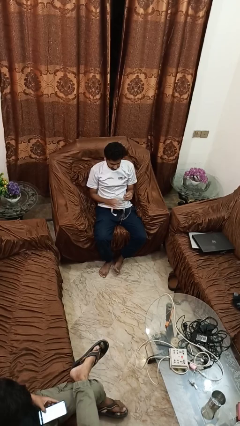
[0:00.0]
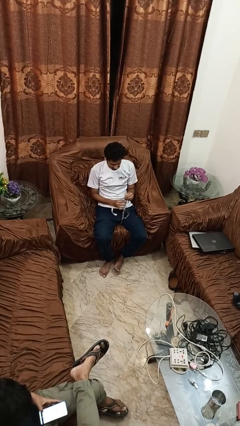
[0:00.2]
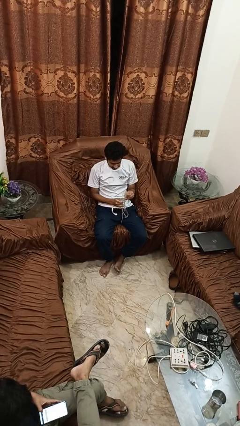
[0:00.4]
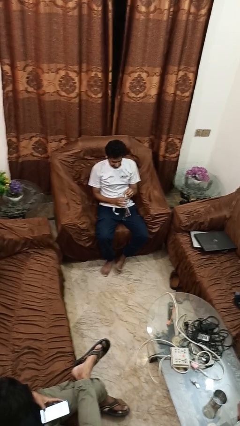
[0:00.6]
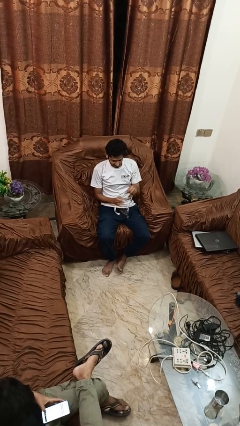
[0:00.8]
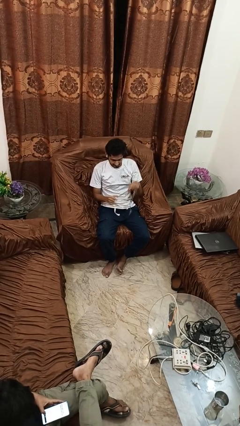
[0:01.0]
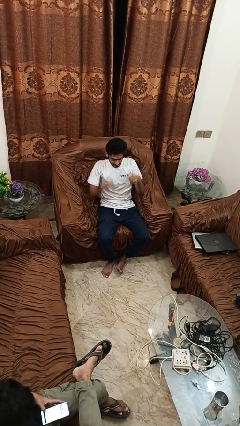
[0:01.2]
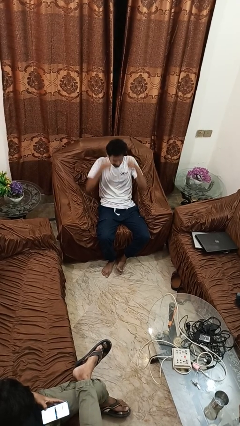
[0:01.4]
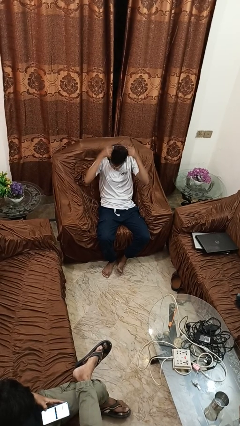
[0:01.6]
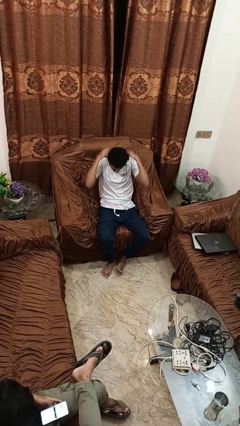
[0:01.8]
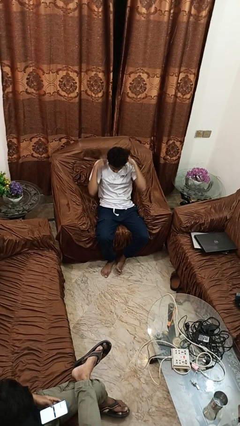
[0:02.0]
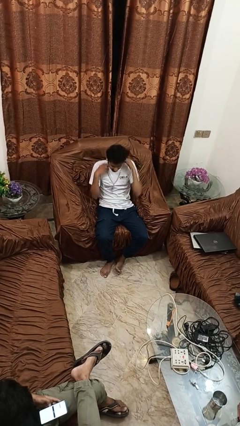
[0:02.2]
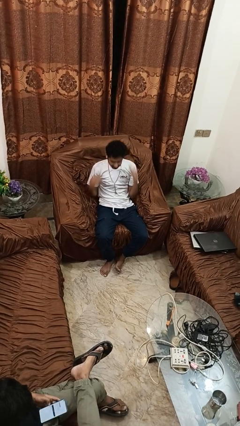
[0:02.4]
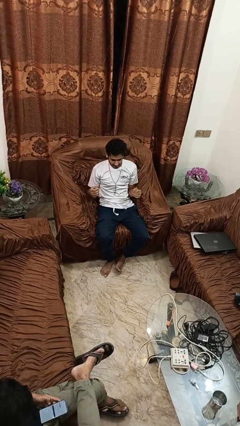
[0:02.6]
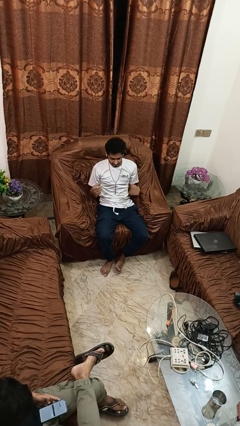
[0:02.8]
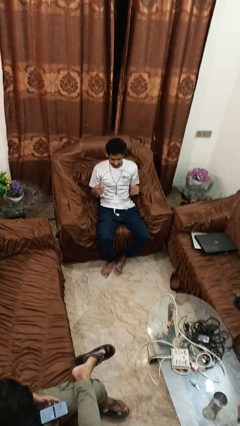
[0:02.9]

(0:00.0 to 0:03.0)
person puts on necklace

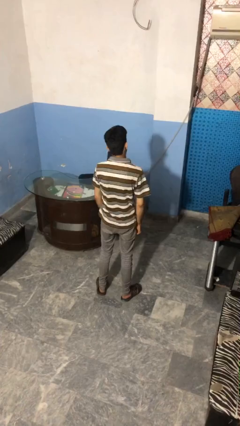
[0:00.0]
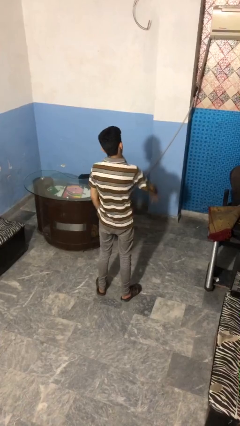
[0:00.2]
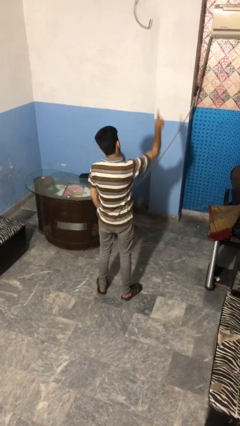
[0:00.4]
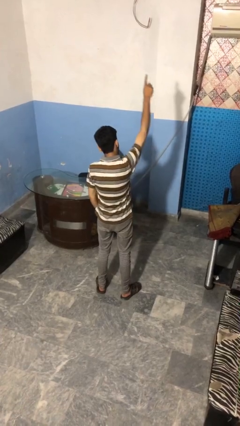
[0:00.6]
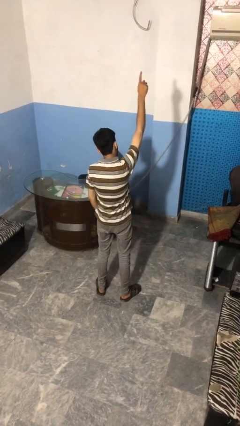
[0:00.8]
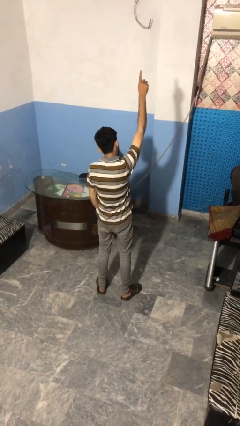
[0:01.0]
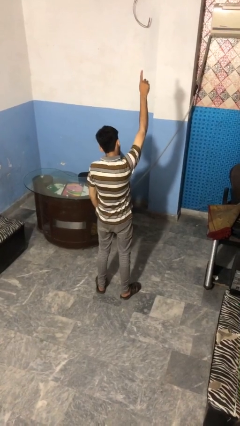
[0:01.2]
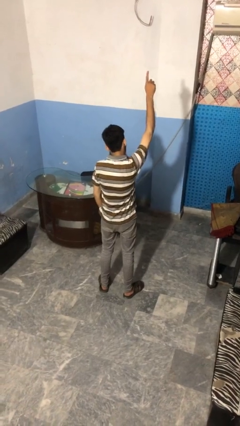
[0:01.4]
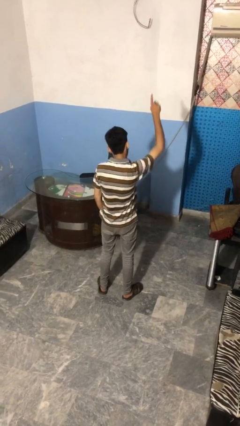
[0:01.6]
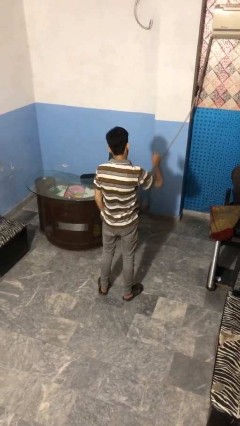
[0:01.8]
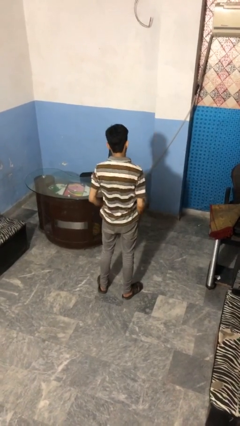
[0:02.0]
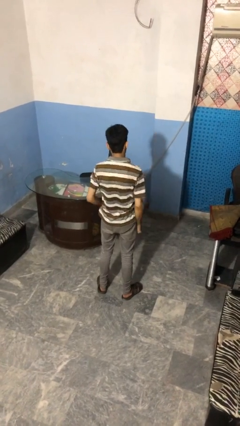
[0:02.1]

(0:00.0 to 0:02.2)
person gestures number one

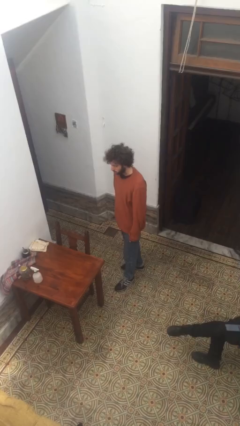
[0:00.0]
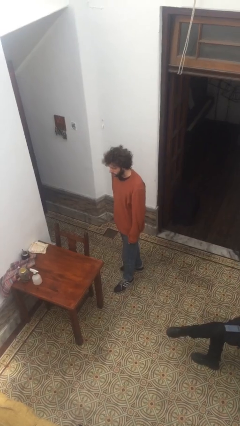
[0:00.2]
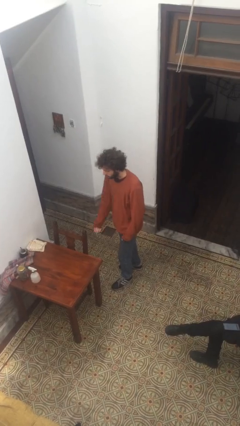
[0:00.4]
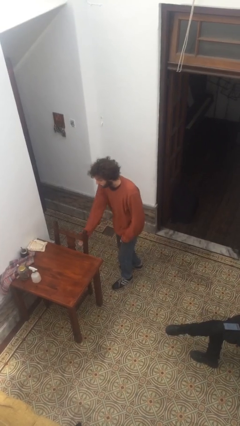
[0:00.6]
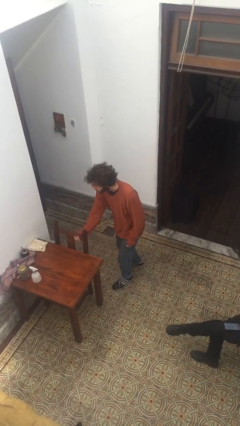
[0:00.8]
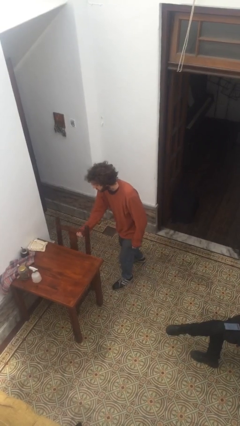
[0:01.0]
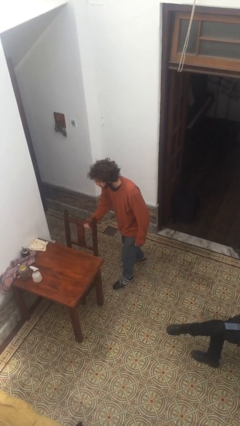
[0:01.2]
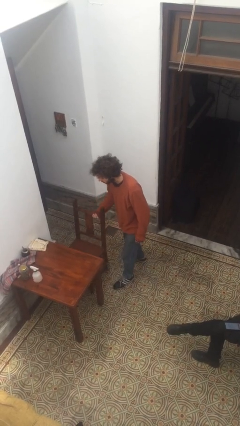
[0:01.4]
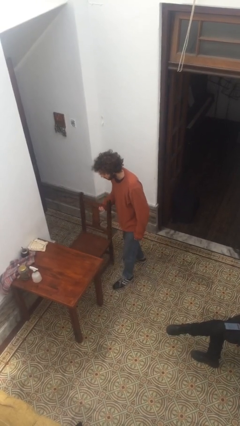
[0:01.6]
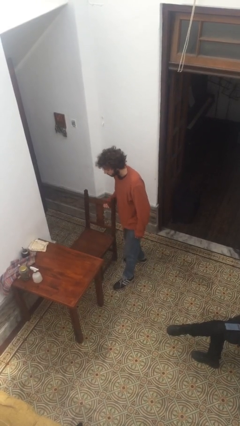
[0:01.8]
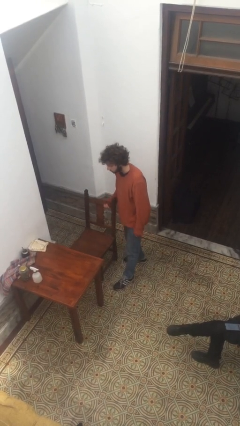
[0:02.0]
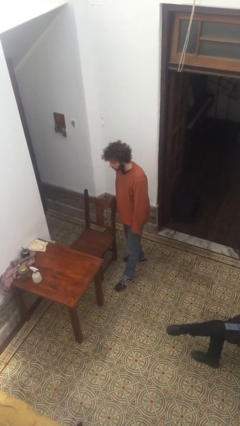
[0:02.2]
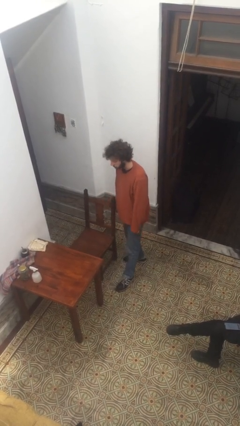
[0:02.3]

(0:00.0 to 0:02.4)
person pulls out chair

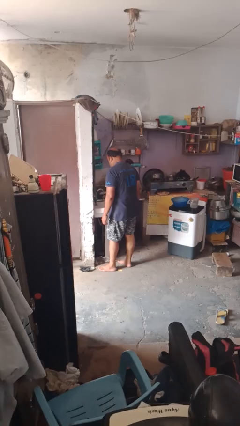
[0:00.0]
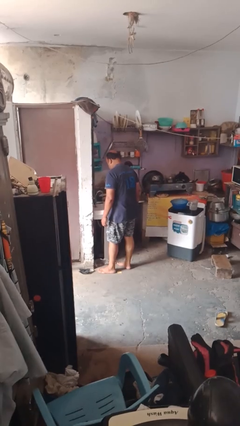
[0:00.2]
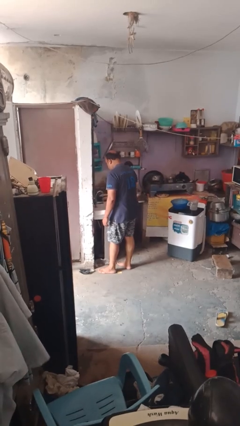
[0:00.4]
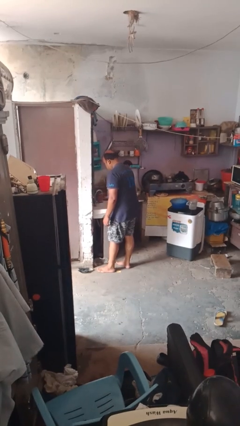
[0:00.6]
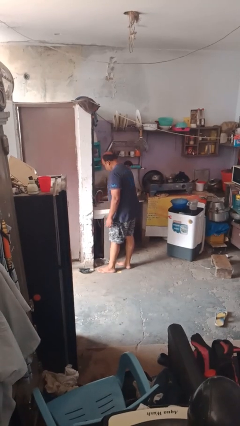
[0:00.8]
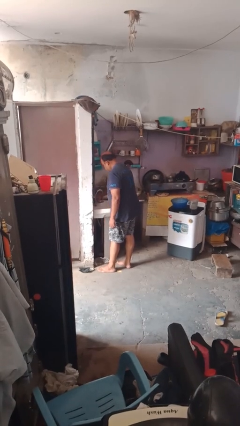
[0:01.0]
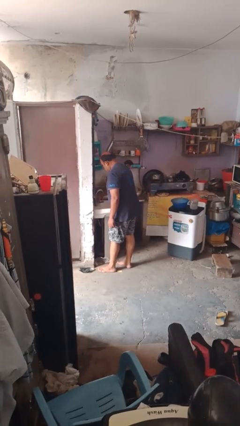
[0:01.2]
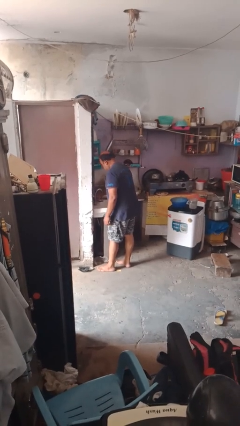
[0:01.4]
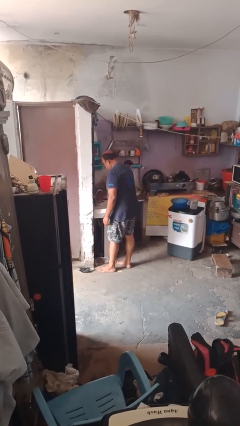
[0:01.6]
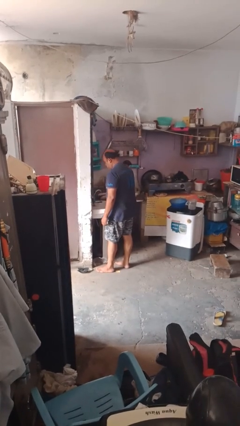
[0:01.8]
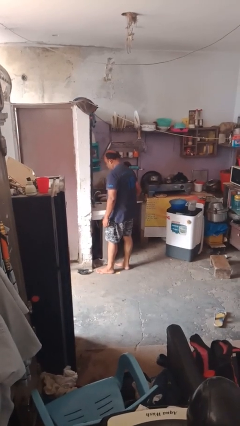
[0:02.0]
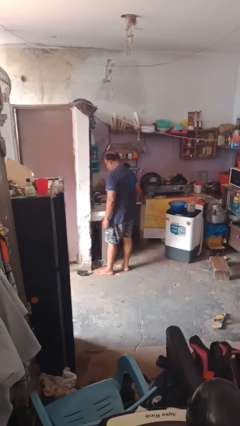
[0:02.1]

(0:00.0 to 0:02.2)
person turns off faucet

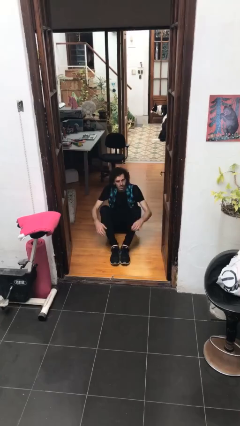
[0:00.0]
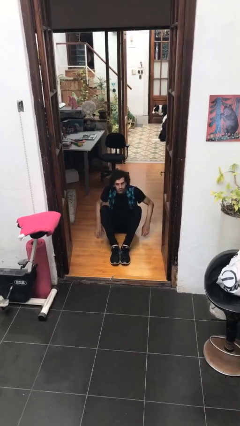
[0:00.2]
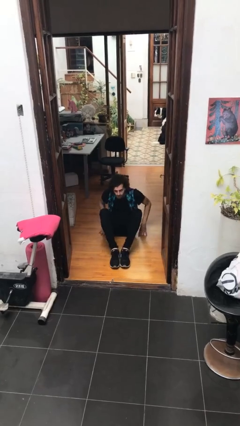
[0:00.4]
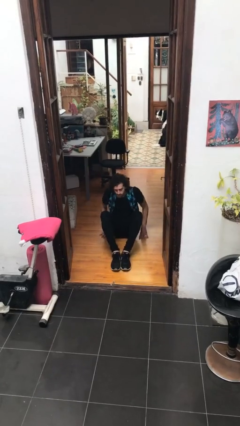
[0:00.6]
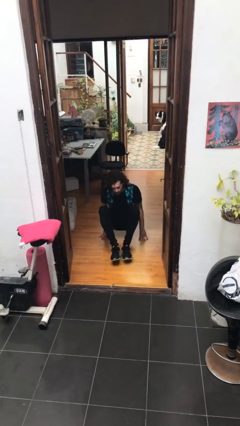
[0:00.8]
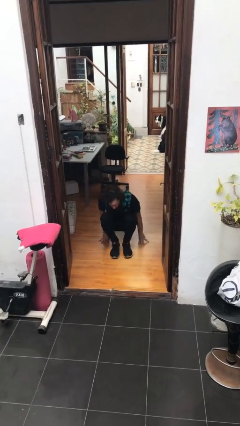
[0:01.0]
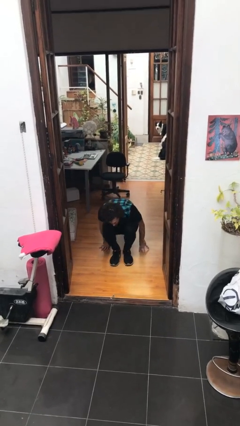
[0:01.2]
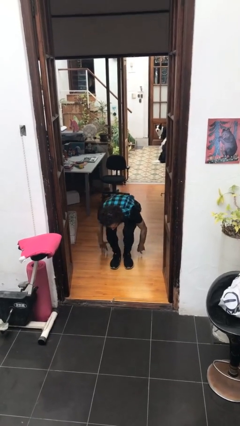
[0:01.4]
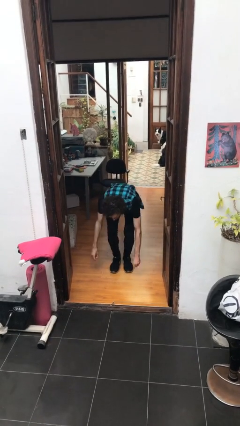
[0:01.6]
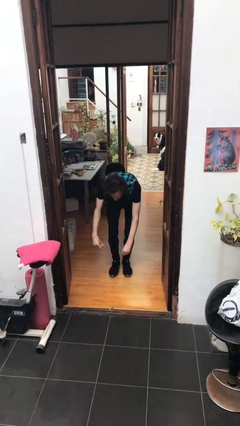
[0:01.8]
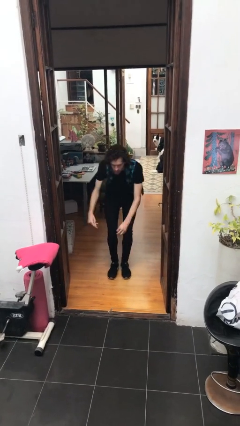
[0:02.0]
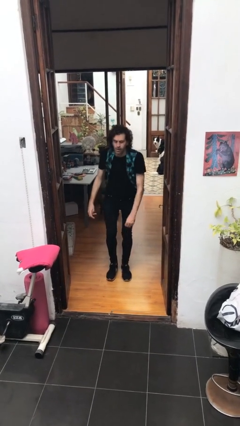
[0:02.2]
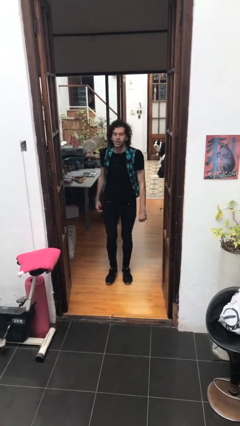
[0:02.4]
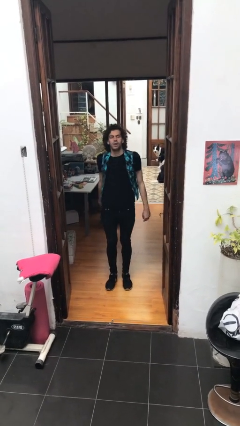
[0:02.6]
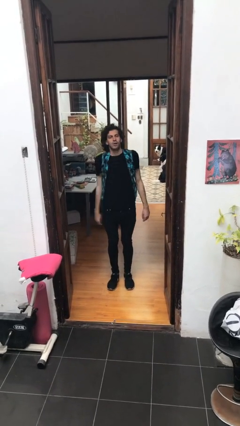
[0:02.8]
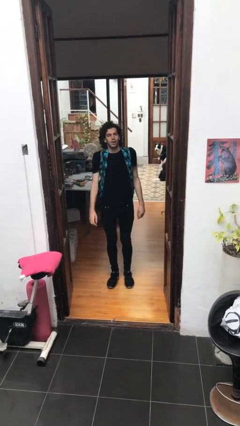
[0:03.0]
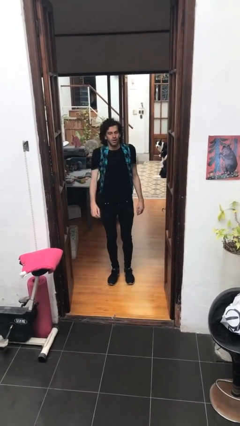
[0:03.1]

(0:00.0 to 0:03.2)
person stands up

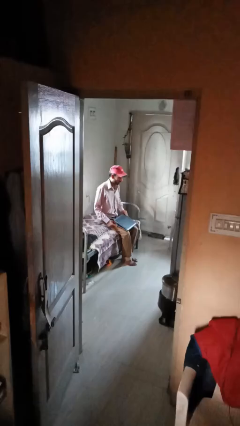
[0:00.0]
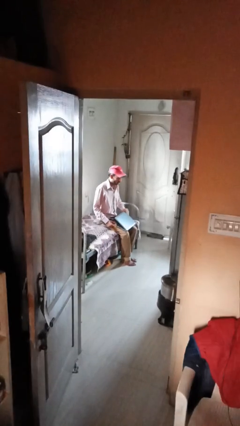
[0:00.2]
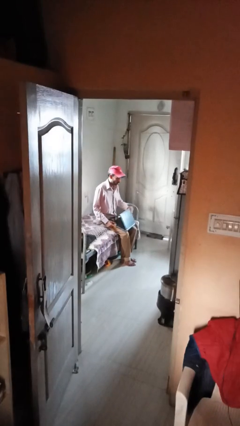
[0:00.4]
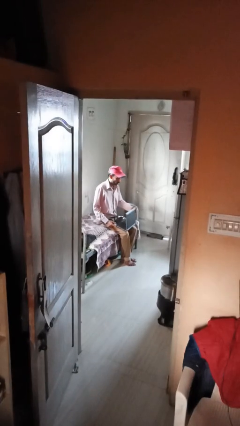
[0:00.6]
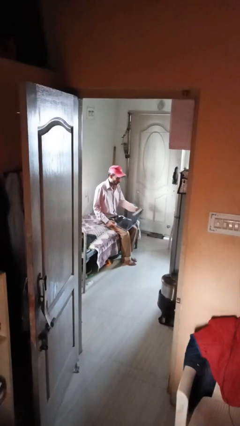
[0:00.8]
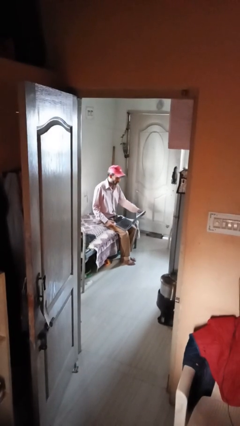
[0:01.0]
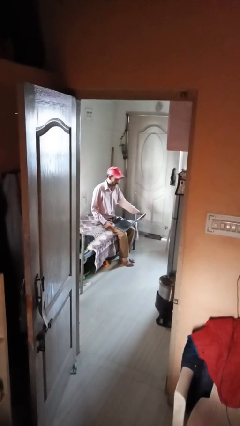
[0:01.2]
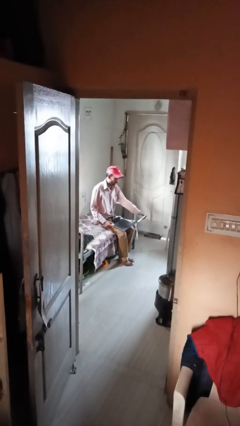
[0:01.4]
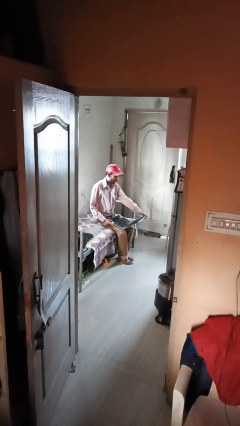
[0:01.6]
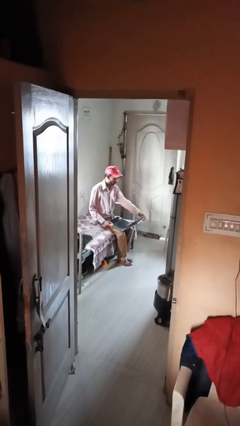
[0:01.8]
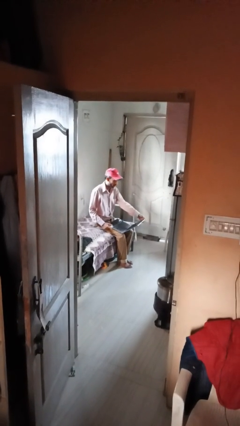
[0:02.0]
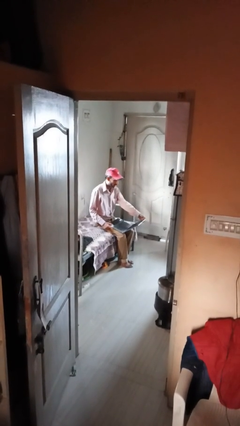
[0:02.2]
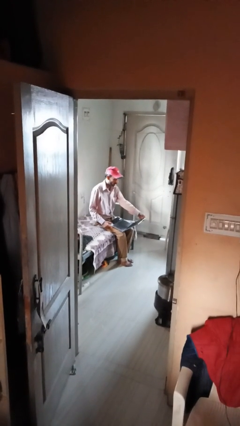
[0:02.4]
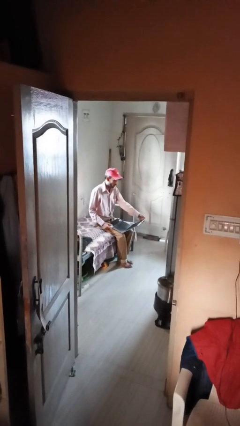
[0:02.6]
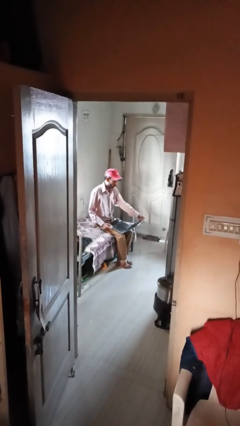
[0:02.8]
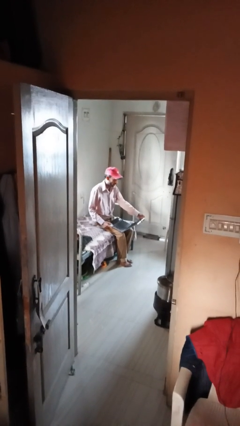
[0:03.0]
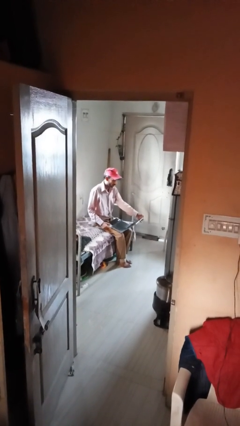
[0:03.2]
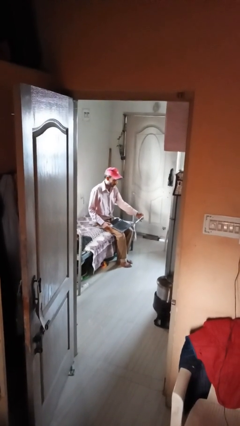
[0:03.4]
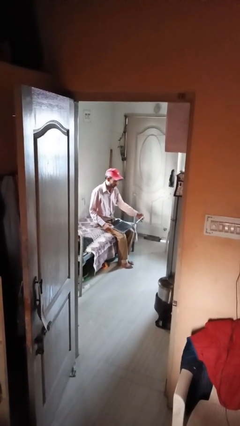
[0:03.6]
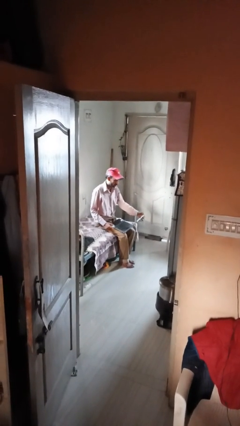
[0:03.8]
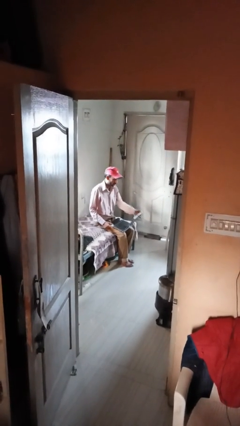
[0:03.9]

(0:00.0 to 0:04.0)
person opens laptop

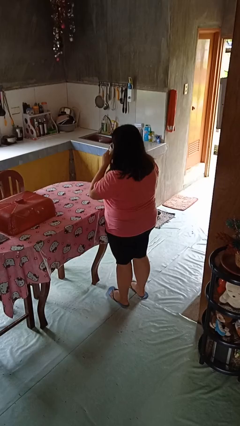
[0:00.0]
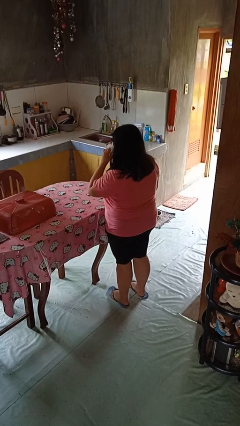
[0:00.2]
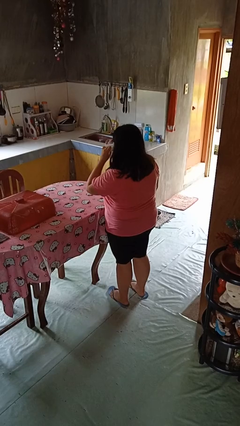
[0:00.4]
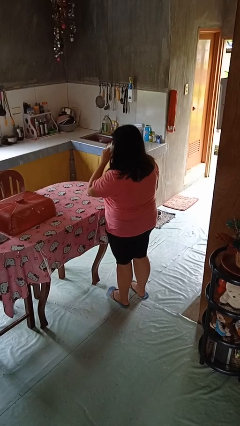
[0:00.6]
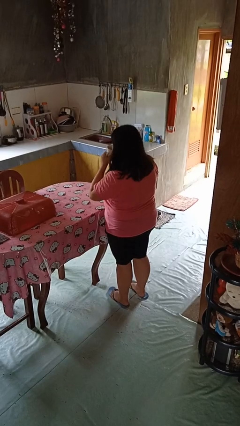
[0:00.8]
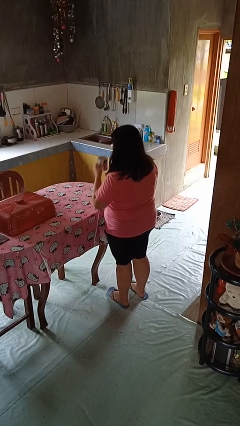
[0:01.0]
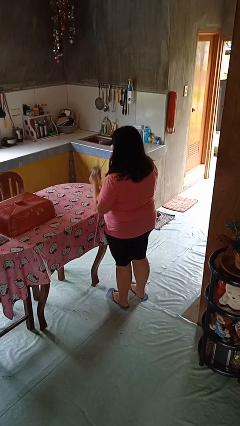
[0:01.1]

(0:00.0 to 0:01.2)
person drinks from mug
